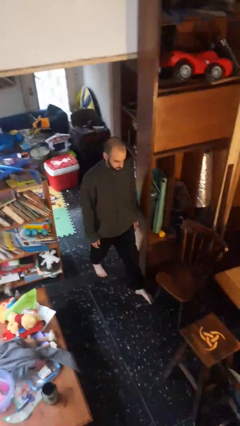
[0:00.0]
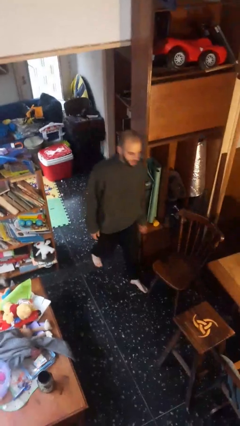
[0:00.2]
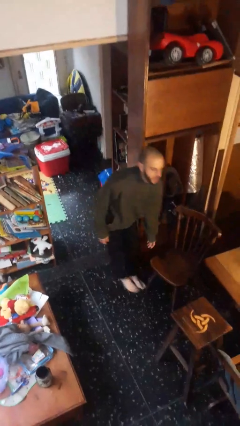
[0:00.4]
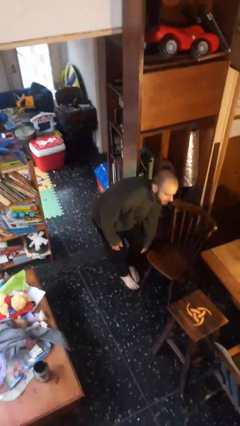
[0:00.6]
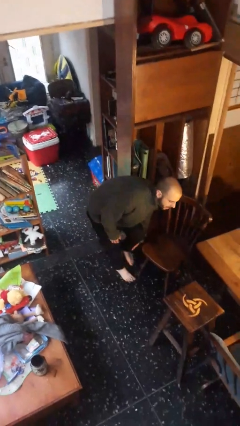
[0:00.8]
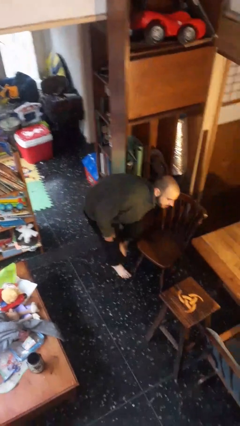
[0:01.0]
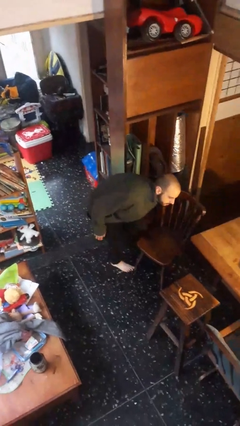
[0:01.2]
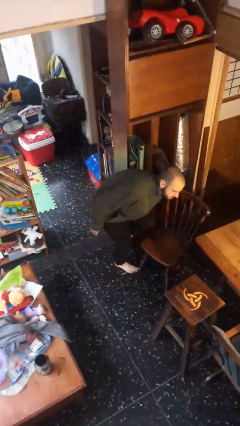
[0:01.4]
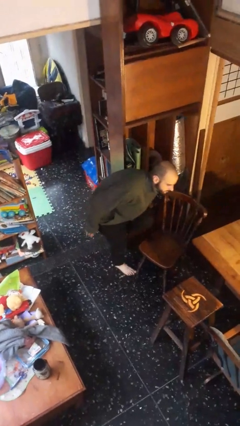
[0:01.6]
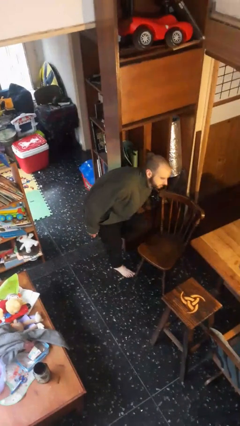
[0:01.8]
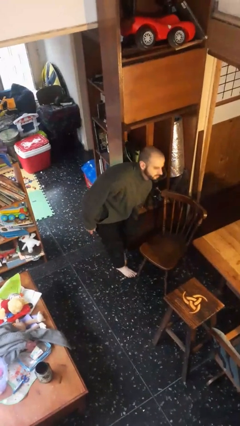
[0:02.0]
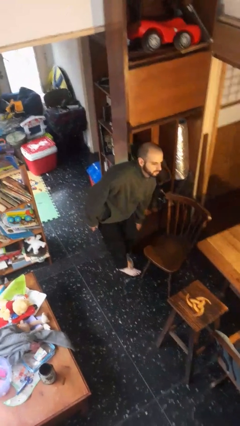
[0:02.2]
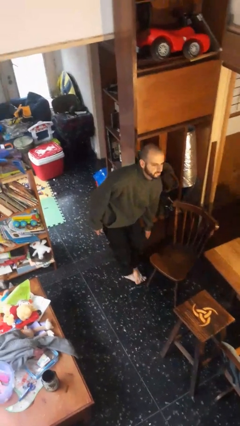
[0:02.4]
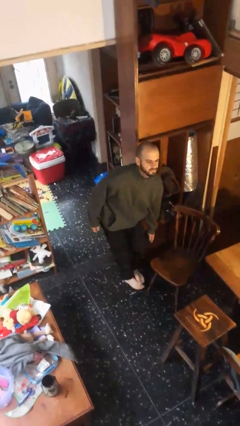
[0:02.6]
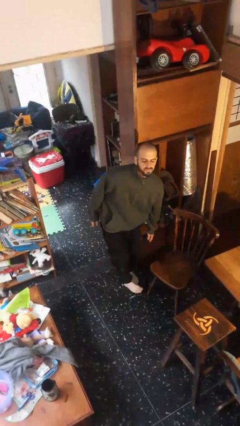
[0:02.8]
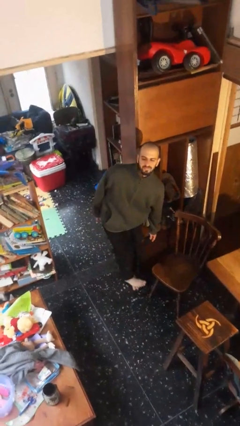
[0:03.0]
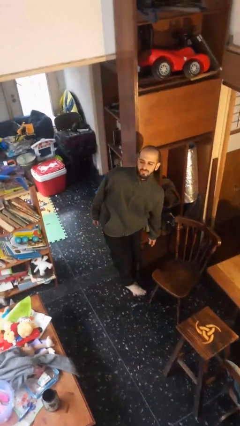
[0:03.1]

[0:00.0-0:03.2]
person stubs toe

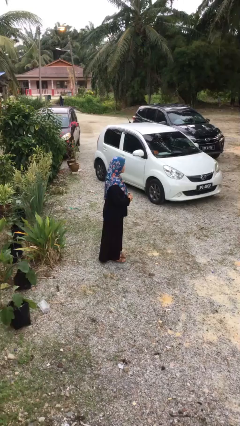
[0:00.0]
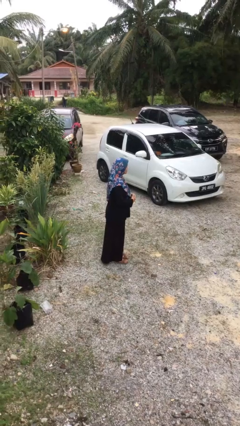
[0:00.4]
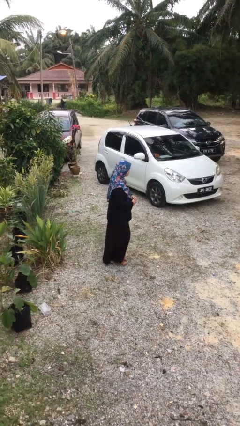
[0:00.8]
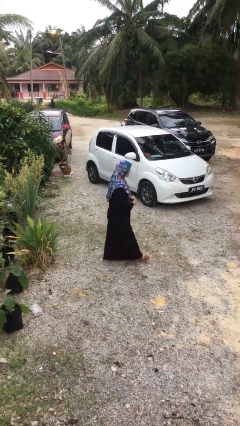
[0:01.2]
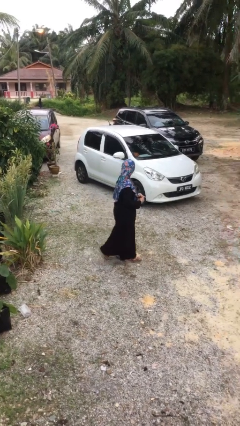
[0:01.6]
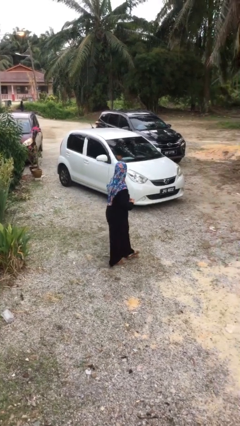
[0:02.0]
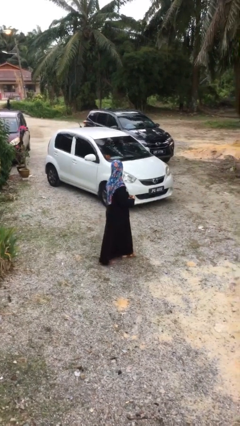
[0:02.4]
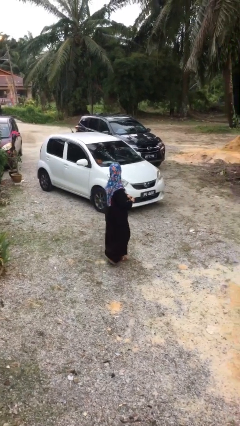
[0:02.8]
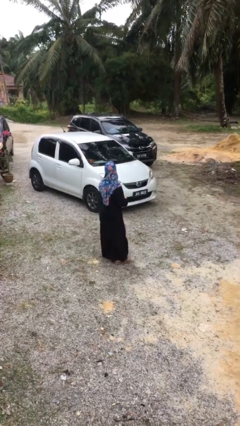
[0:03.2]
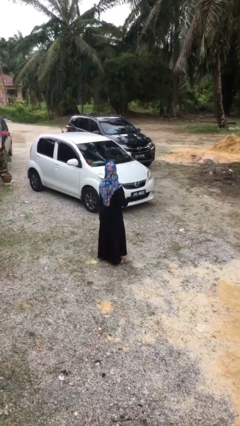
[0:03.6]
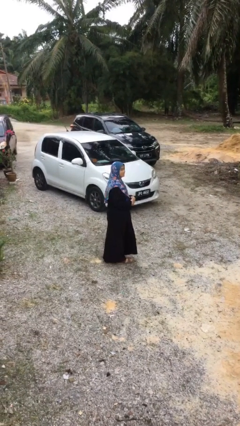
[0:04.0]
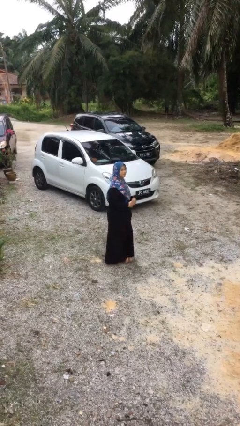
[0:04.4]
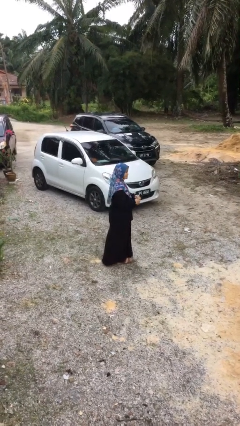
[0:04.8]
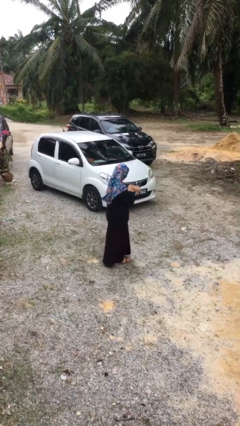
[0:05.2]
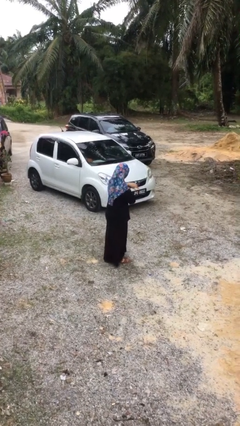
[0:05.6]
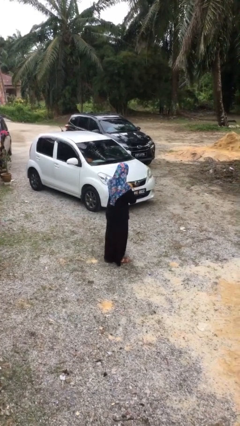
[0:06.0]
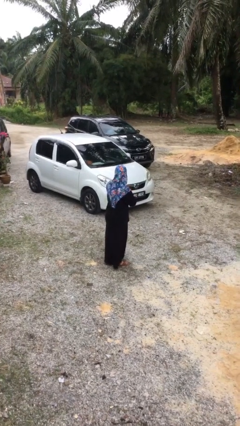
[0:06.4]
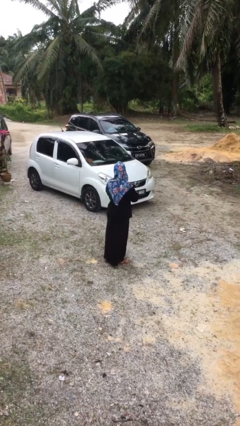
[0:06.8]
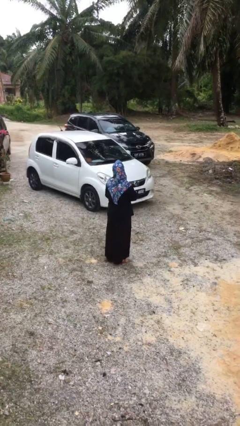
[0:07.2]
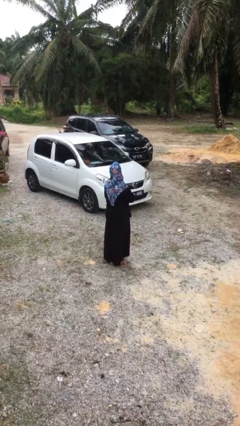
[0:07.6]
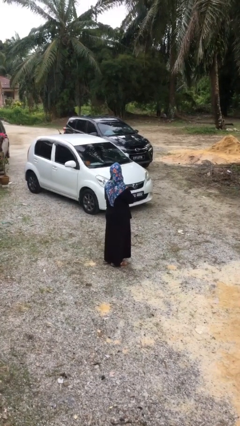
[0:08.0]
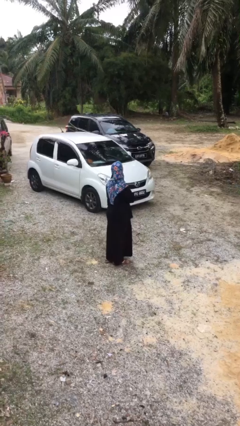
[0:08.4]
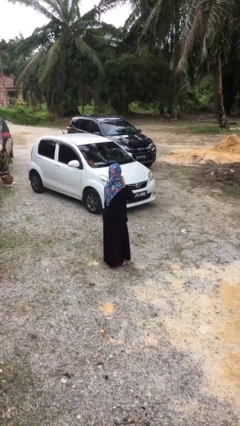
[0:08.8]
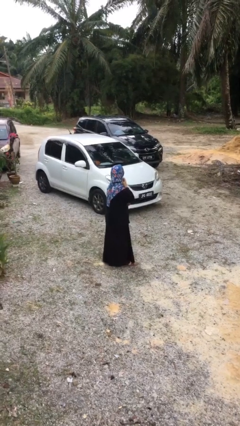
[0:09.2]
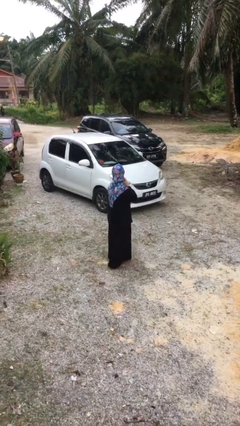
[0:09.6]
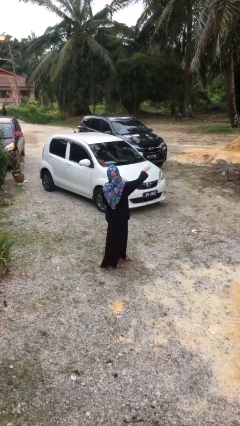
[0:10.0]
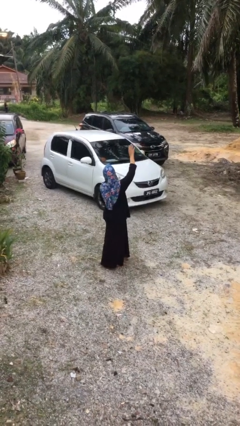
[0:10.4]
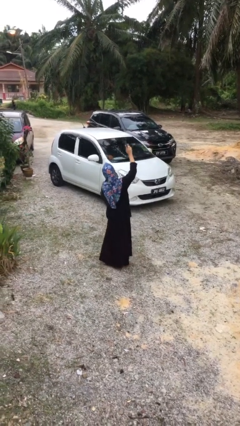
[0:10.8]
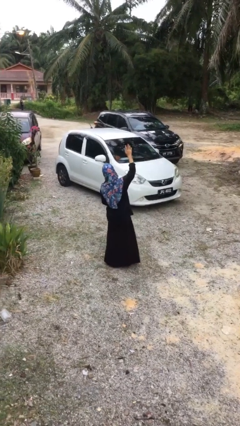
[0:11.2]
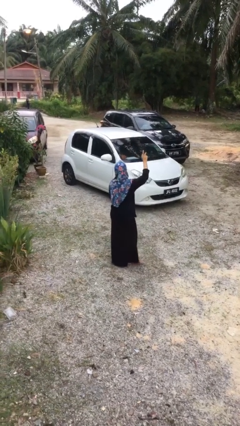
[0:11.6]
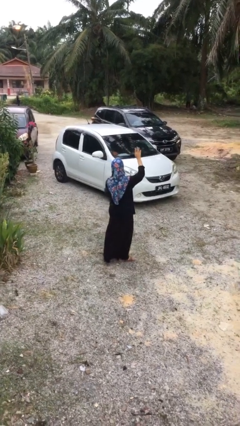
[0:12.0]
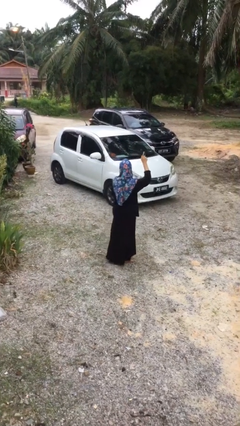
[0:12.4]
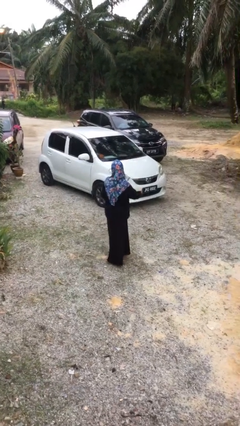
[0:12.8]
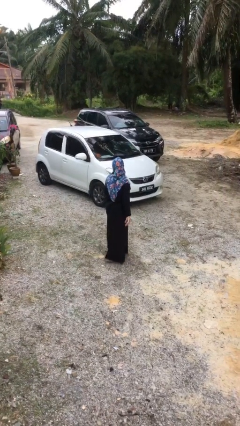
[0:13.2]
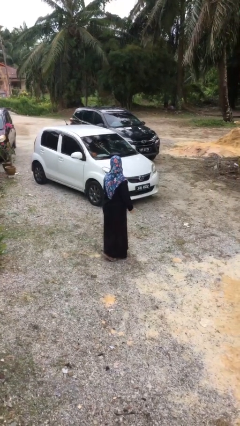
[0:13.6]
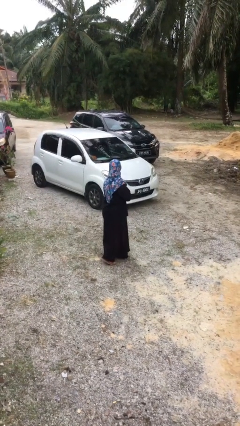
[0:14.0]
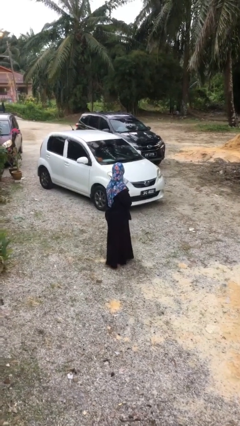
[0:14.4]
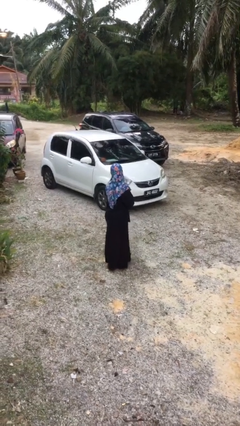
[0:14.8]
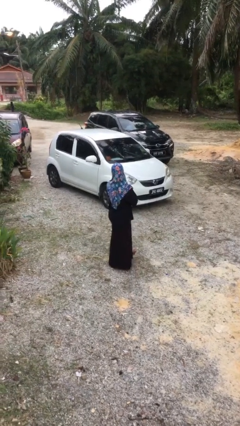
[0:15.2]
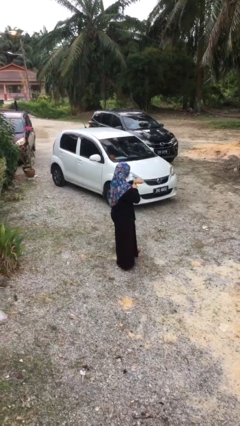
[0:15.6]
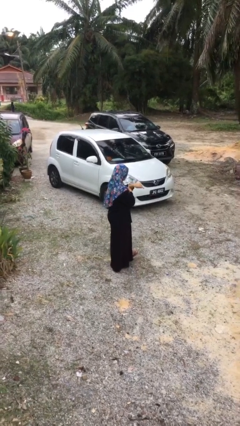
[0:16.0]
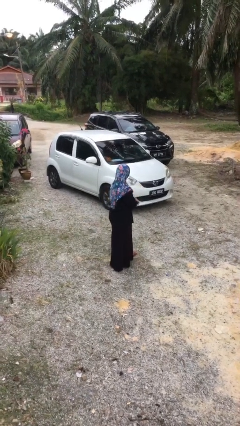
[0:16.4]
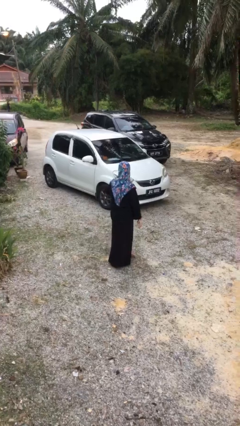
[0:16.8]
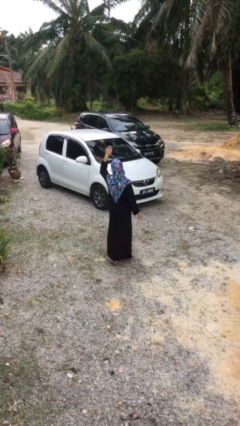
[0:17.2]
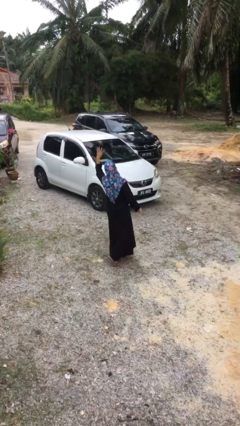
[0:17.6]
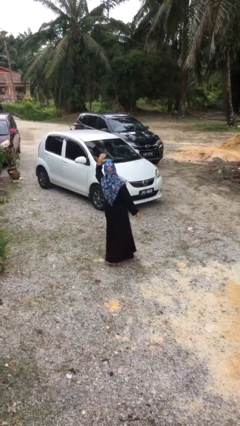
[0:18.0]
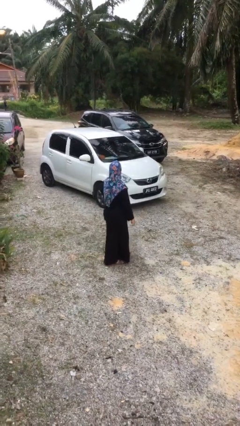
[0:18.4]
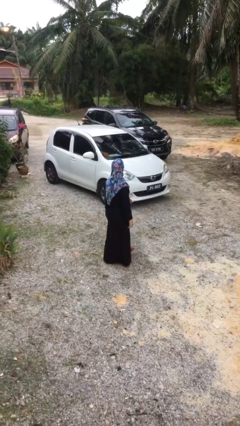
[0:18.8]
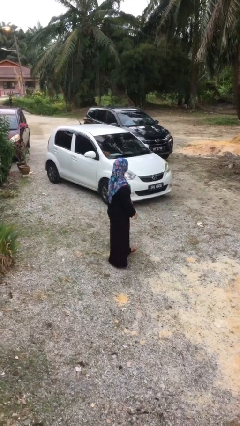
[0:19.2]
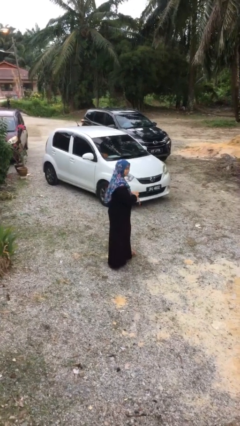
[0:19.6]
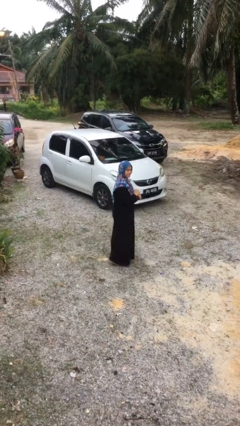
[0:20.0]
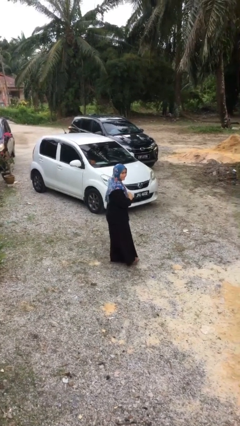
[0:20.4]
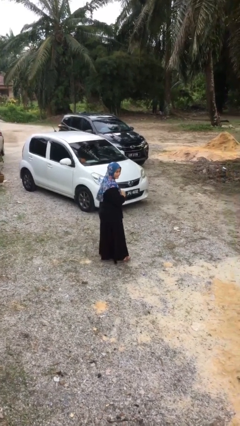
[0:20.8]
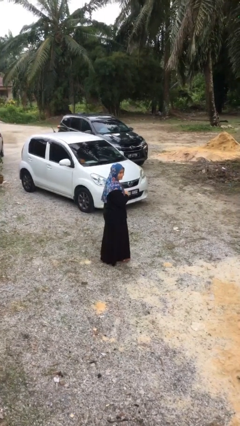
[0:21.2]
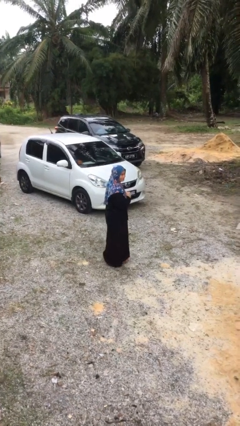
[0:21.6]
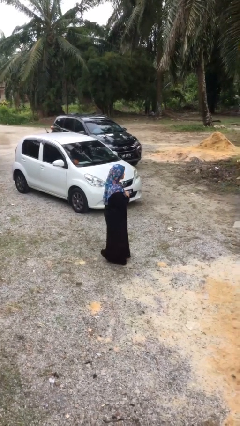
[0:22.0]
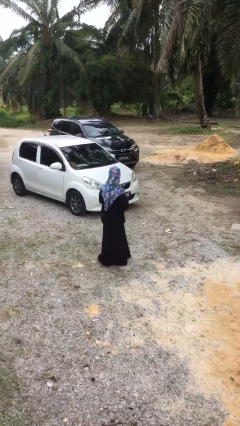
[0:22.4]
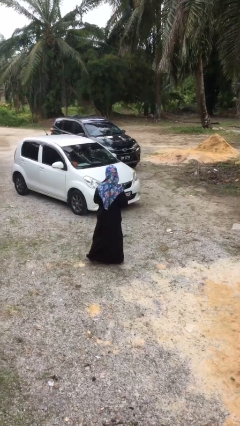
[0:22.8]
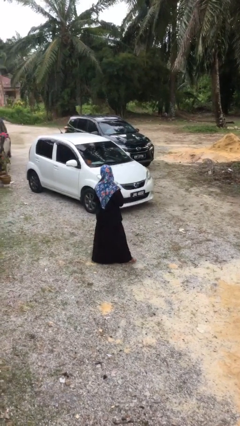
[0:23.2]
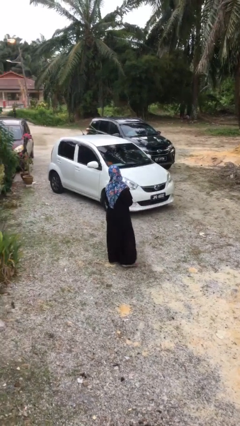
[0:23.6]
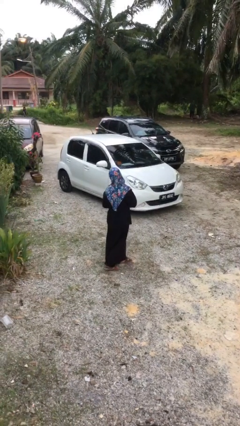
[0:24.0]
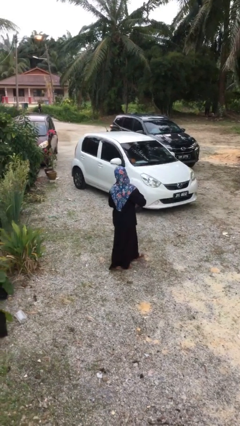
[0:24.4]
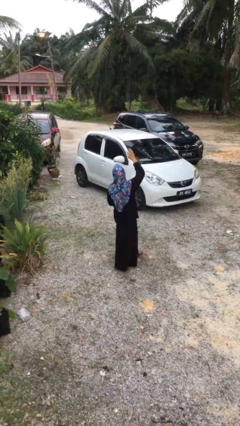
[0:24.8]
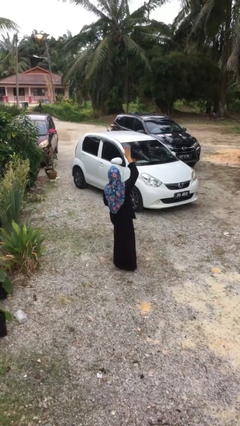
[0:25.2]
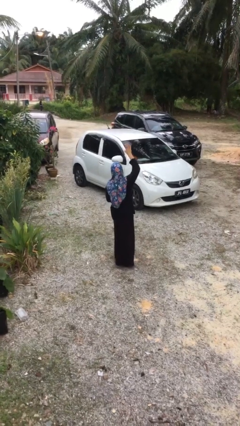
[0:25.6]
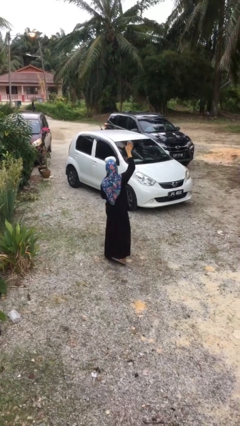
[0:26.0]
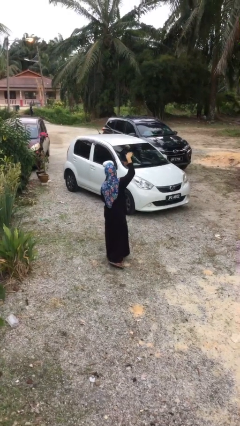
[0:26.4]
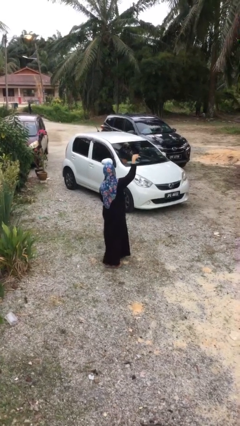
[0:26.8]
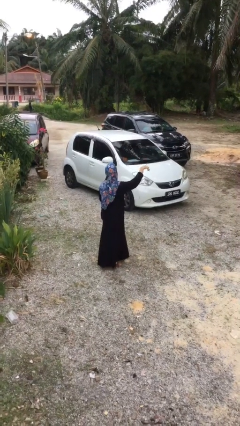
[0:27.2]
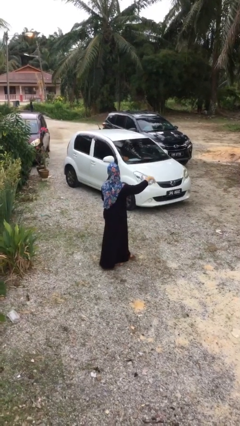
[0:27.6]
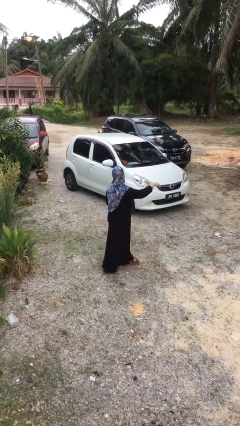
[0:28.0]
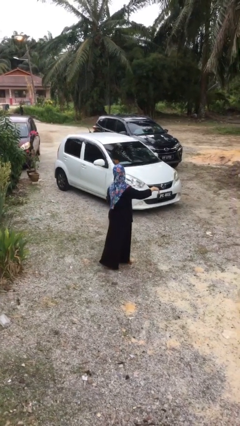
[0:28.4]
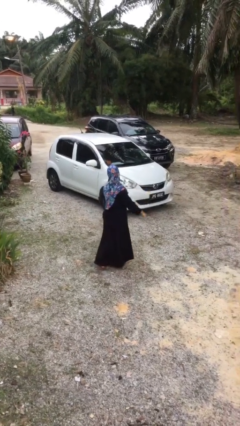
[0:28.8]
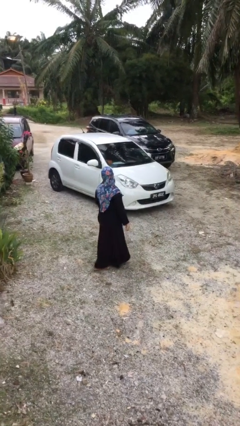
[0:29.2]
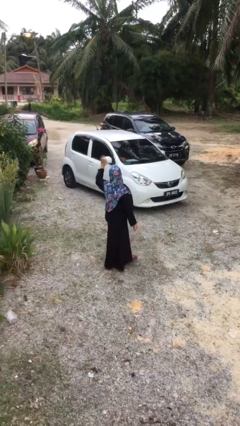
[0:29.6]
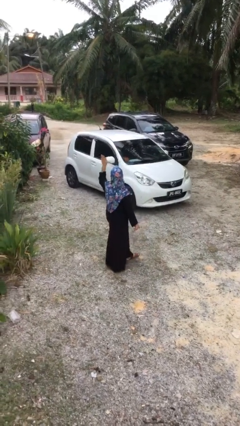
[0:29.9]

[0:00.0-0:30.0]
person walks
